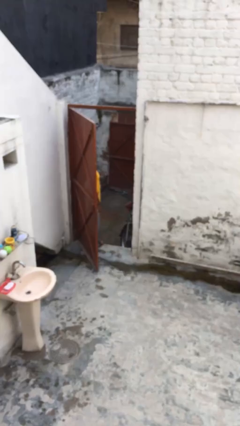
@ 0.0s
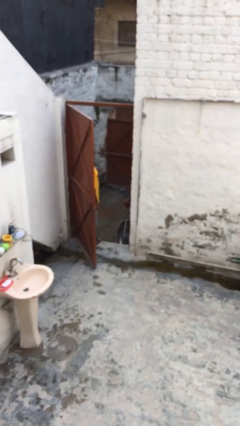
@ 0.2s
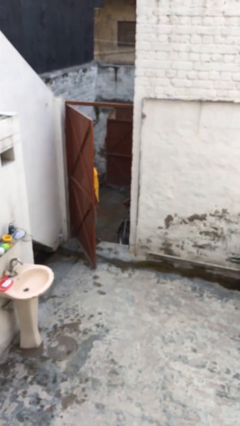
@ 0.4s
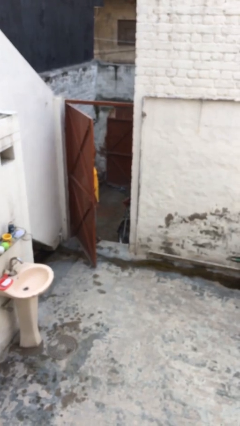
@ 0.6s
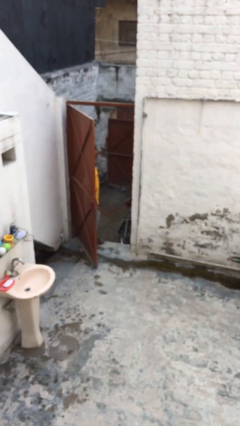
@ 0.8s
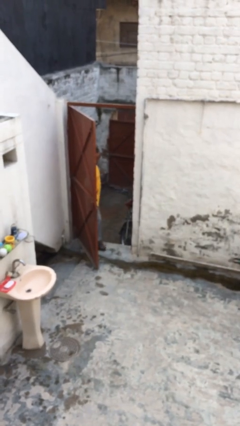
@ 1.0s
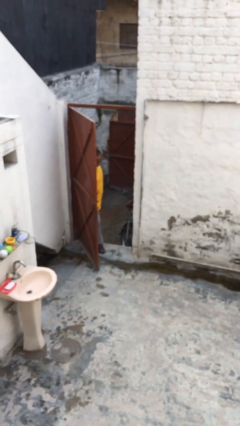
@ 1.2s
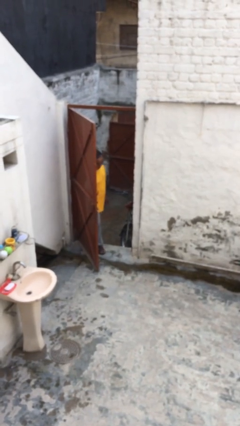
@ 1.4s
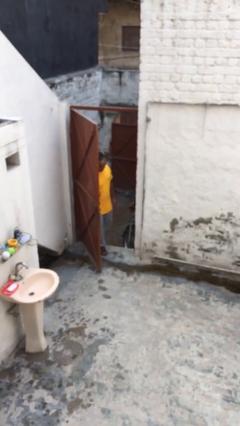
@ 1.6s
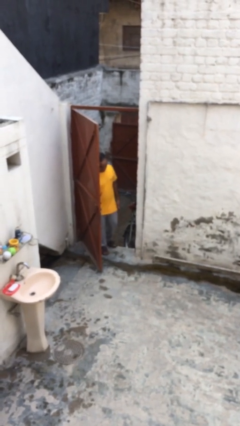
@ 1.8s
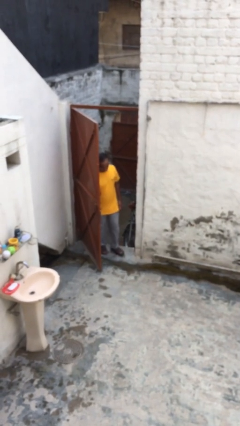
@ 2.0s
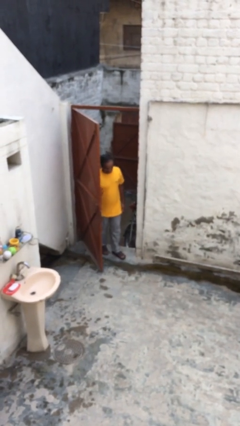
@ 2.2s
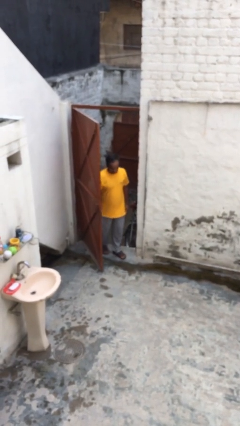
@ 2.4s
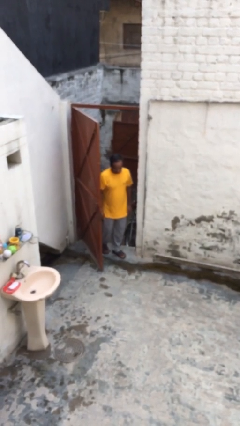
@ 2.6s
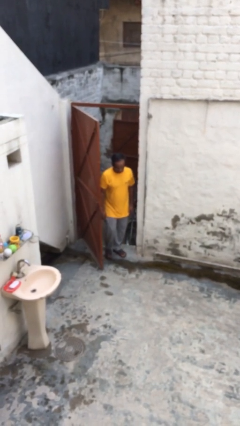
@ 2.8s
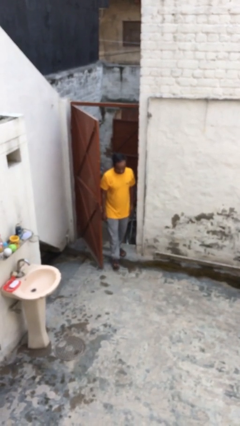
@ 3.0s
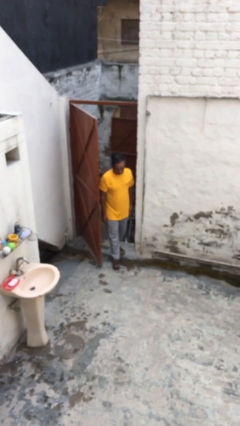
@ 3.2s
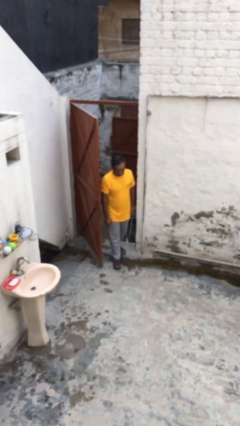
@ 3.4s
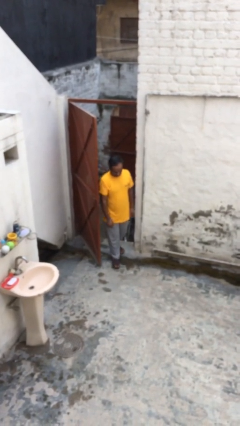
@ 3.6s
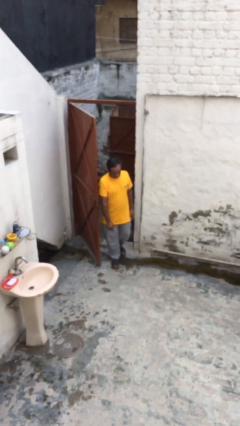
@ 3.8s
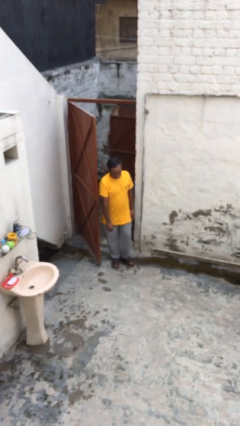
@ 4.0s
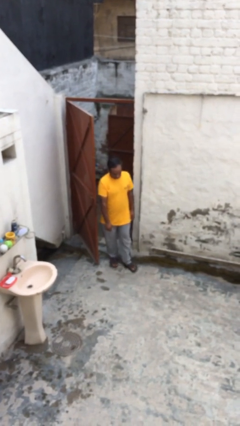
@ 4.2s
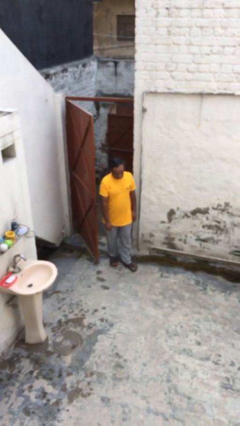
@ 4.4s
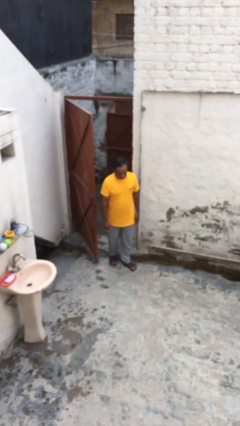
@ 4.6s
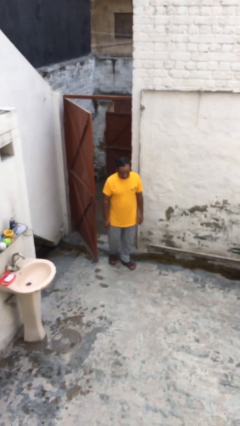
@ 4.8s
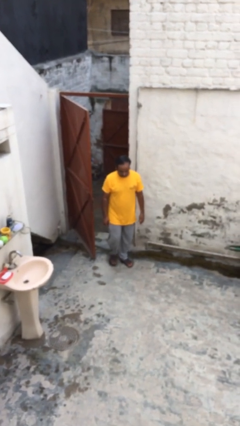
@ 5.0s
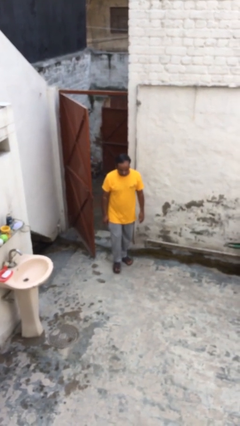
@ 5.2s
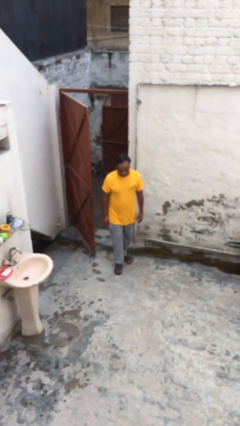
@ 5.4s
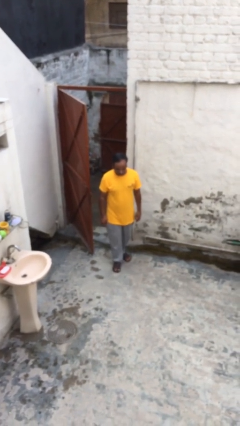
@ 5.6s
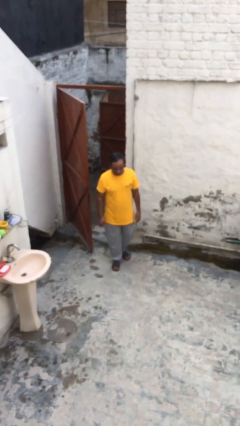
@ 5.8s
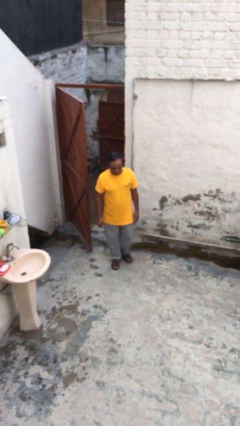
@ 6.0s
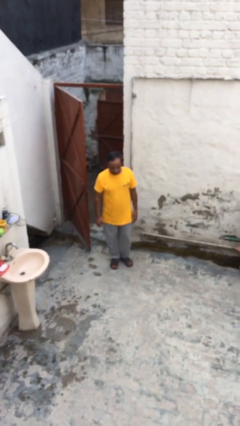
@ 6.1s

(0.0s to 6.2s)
person enters scene through structure

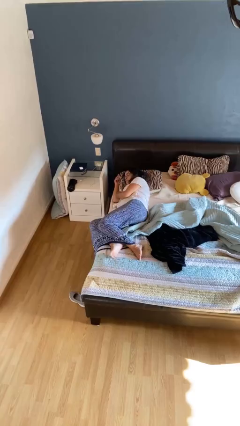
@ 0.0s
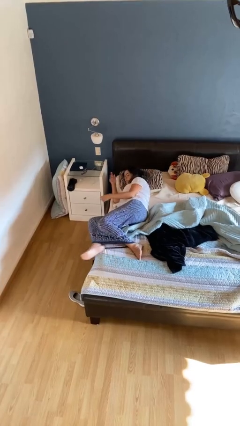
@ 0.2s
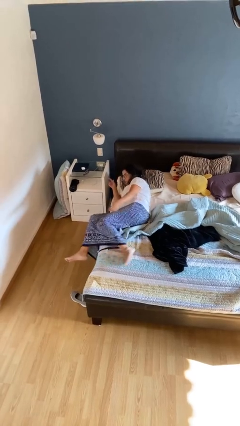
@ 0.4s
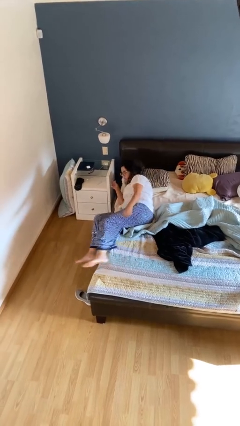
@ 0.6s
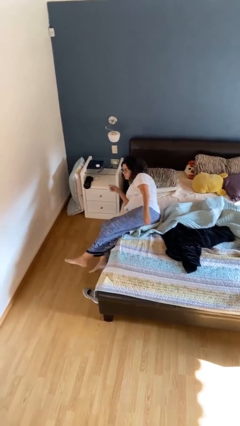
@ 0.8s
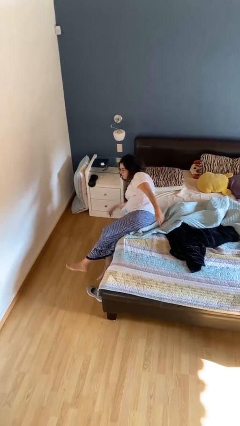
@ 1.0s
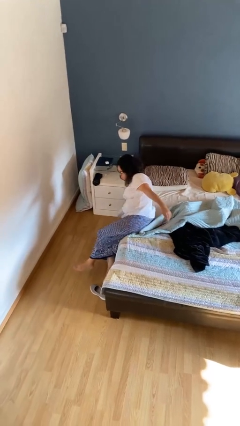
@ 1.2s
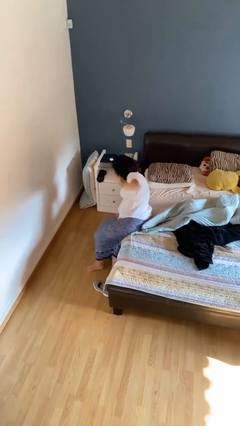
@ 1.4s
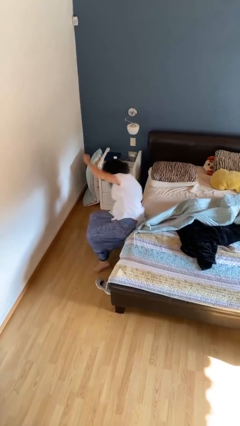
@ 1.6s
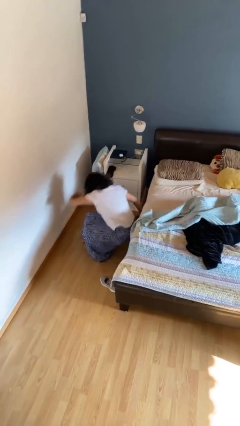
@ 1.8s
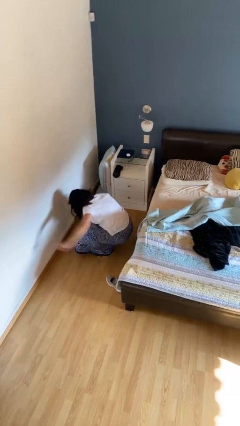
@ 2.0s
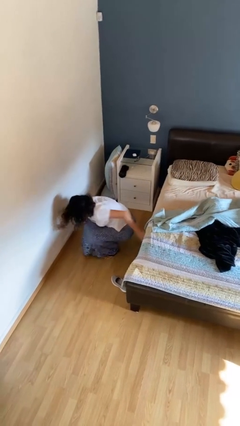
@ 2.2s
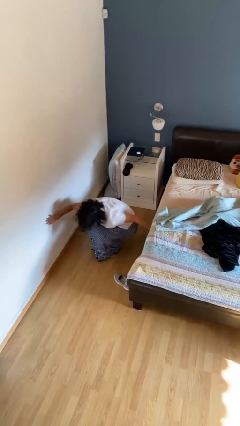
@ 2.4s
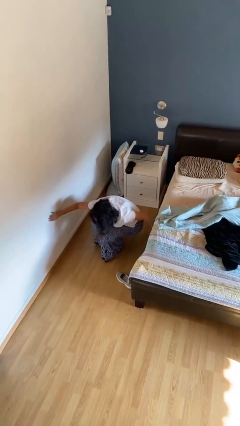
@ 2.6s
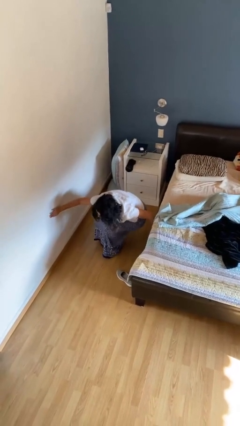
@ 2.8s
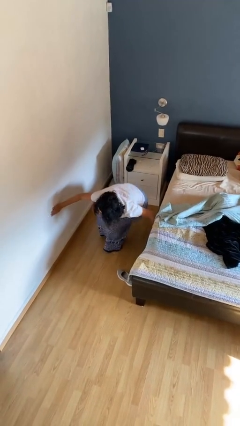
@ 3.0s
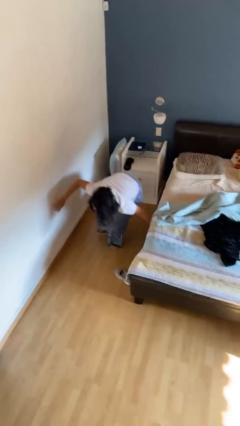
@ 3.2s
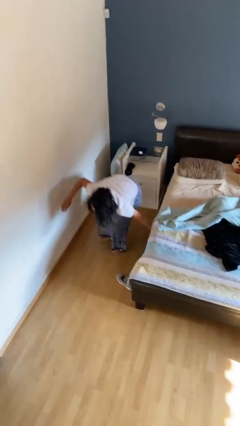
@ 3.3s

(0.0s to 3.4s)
person falls from bed

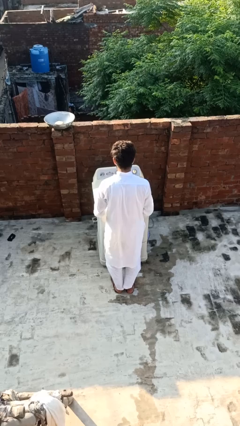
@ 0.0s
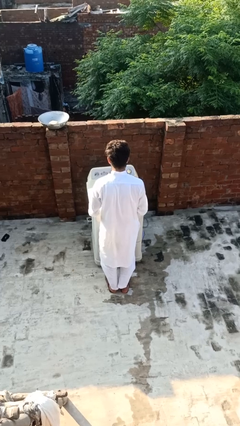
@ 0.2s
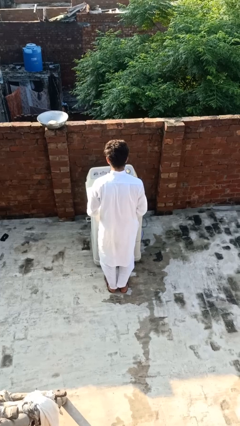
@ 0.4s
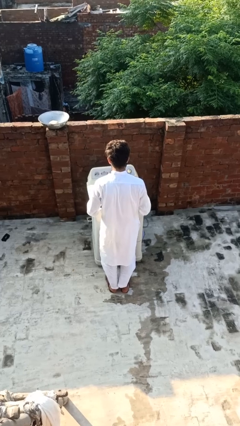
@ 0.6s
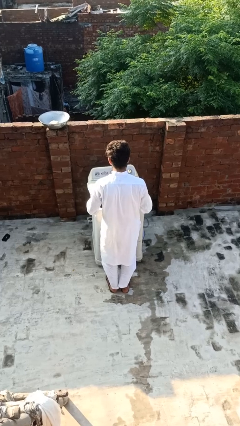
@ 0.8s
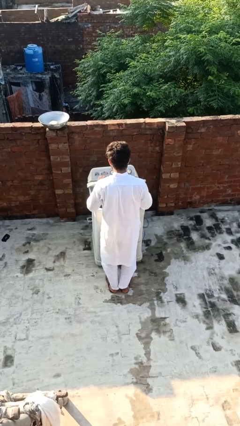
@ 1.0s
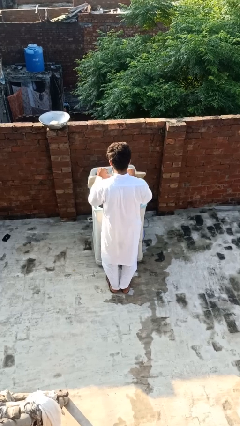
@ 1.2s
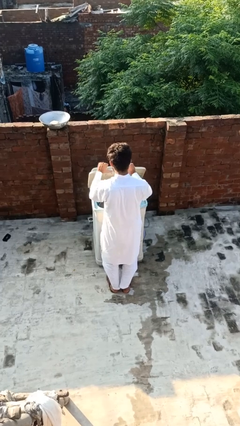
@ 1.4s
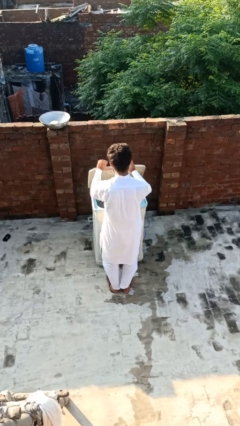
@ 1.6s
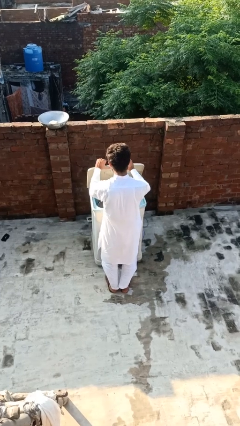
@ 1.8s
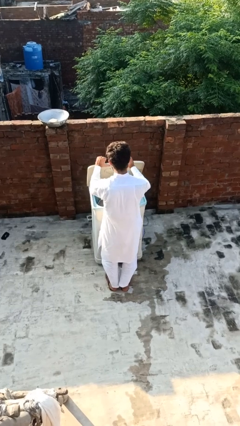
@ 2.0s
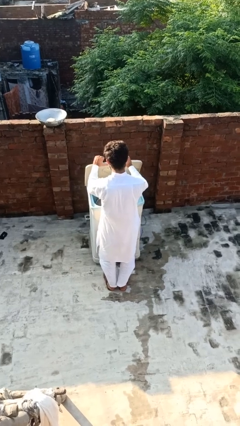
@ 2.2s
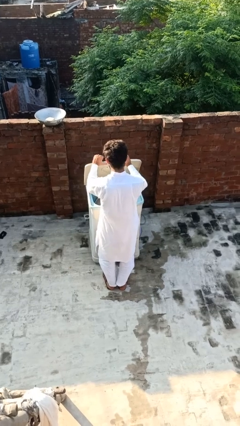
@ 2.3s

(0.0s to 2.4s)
person opens clothes washer

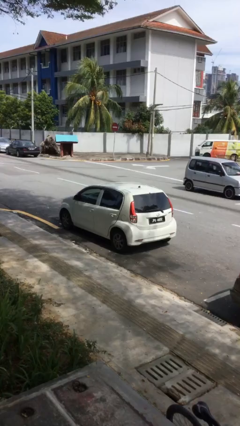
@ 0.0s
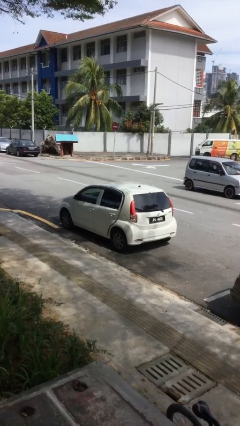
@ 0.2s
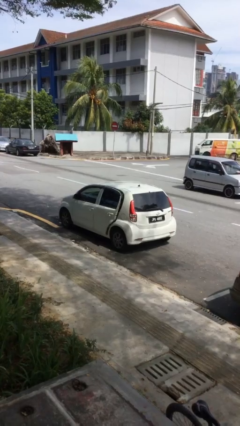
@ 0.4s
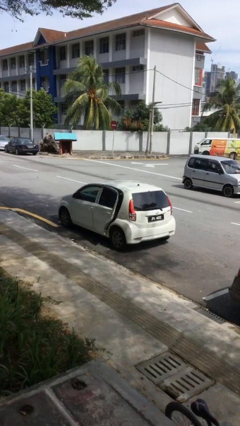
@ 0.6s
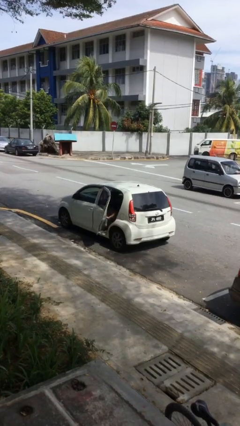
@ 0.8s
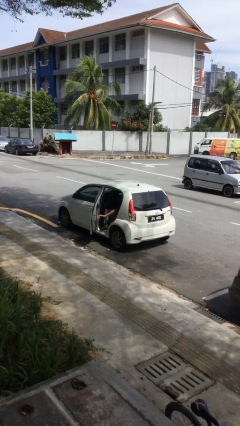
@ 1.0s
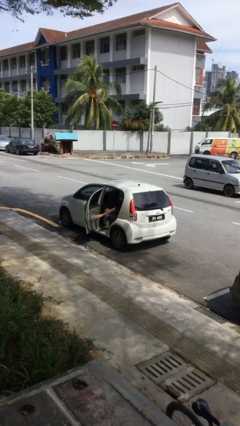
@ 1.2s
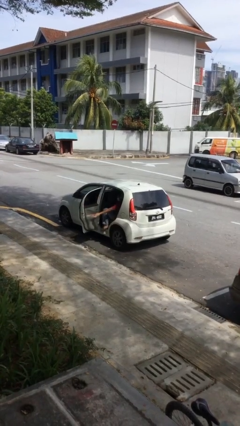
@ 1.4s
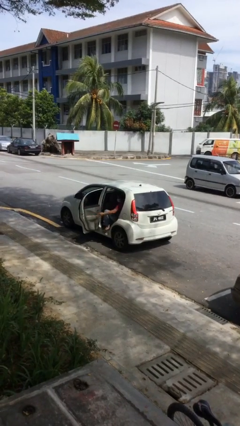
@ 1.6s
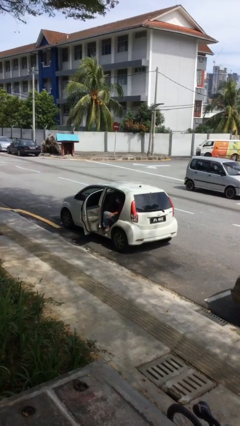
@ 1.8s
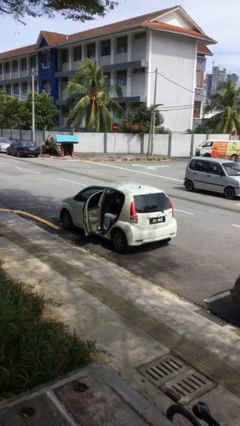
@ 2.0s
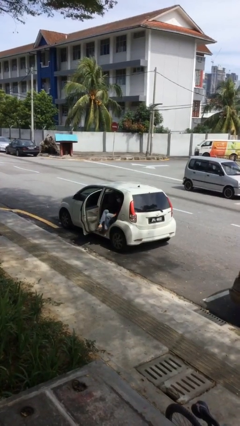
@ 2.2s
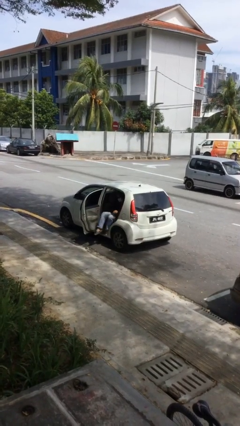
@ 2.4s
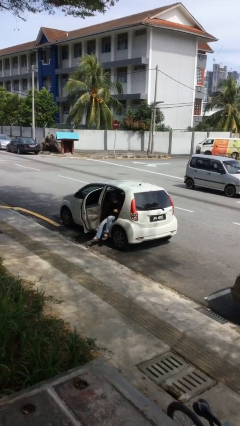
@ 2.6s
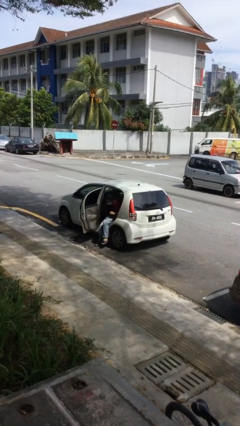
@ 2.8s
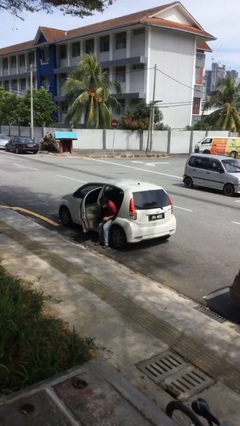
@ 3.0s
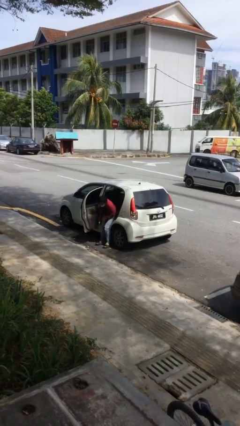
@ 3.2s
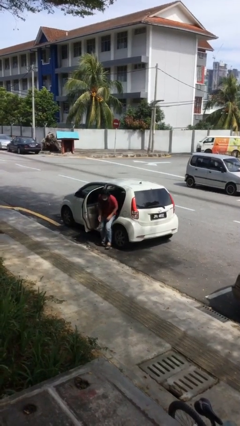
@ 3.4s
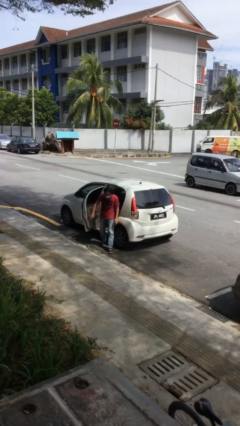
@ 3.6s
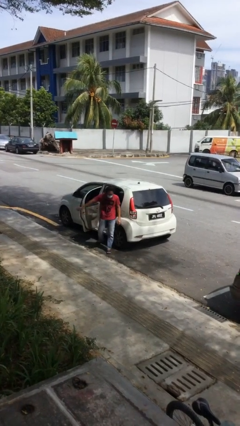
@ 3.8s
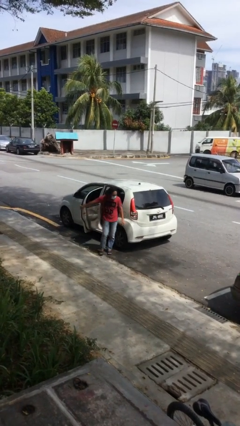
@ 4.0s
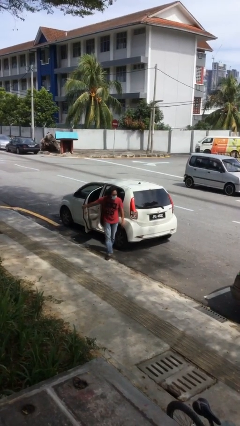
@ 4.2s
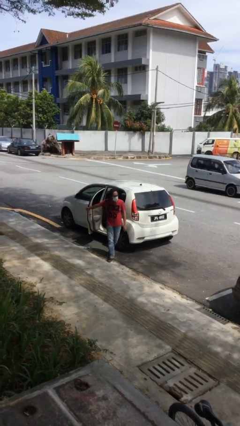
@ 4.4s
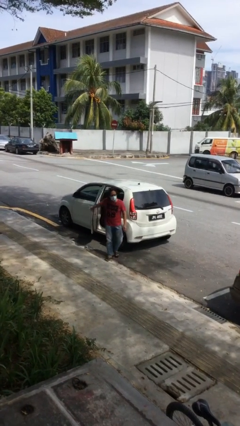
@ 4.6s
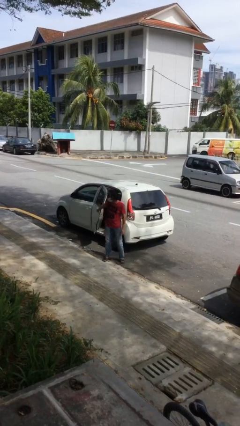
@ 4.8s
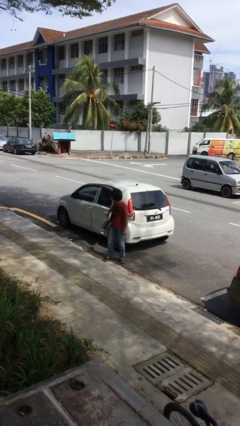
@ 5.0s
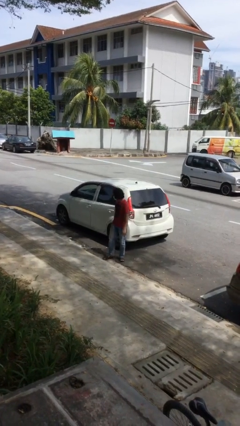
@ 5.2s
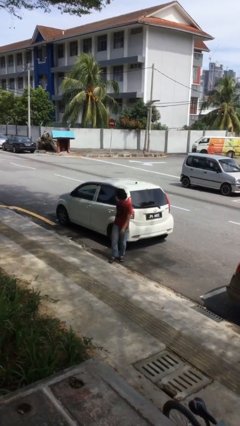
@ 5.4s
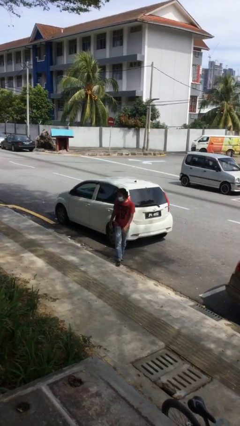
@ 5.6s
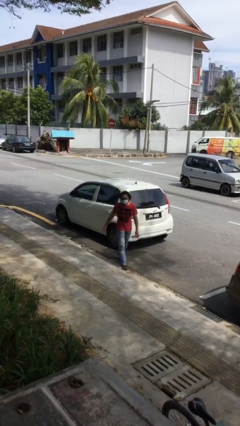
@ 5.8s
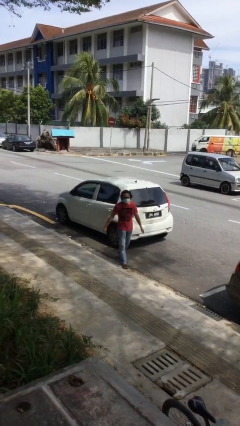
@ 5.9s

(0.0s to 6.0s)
car drops off person
